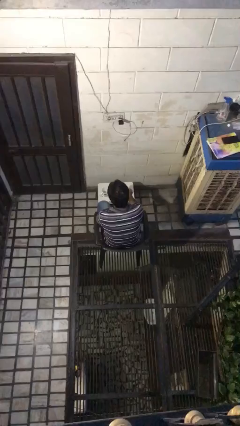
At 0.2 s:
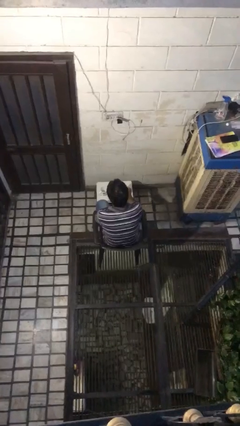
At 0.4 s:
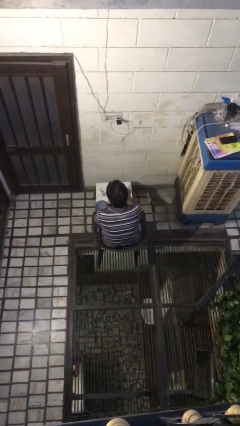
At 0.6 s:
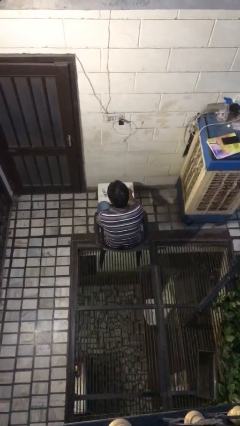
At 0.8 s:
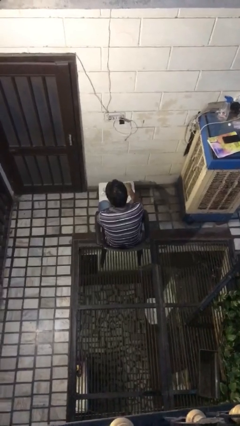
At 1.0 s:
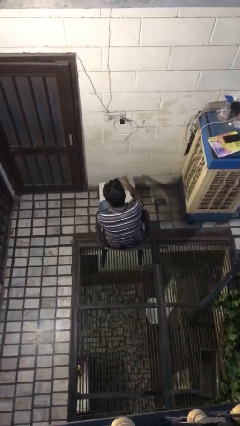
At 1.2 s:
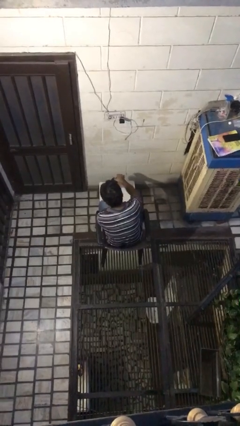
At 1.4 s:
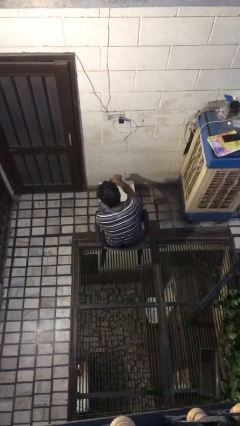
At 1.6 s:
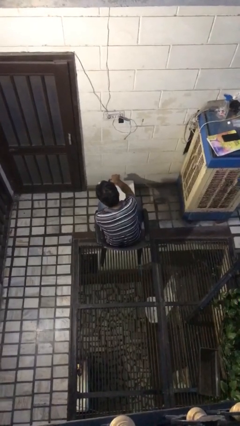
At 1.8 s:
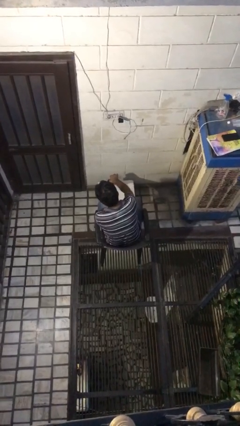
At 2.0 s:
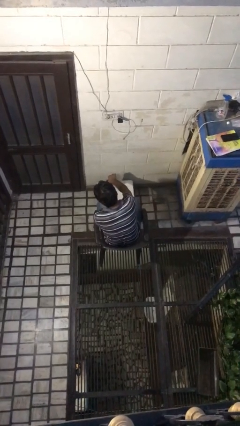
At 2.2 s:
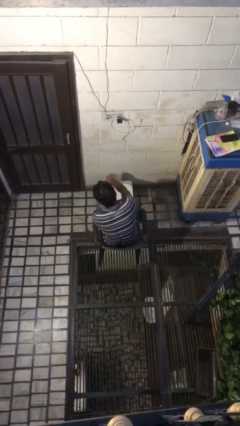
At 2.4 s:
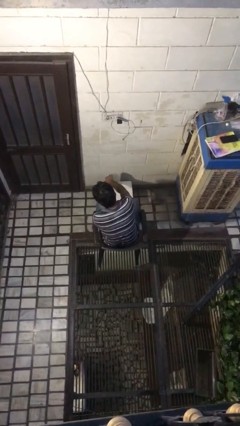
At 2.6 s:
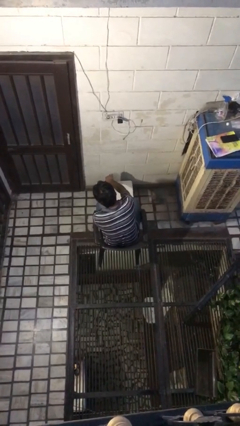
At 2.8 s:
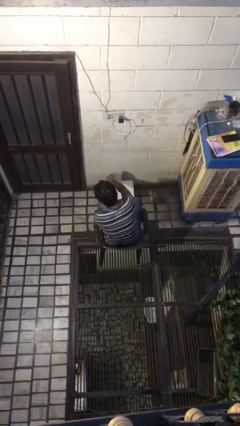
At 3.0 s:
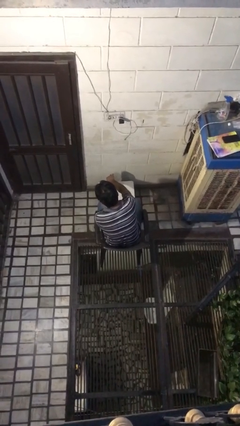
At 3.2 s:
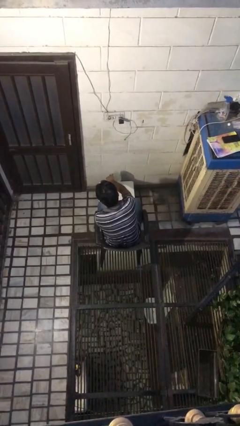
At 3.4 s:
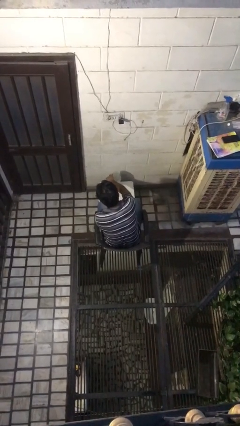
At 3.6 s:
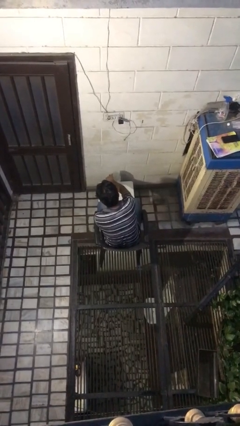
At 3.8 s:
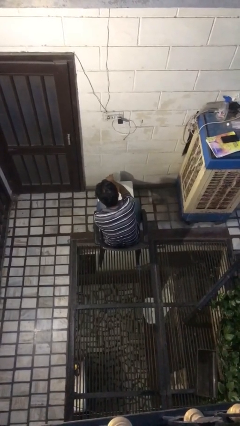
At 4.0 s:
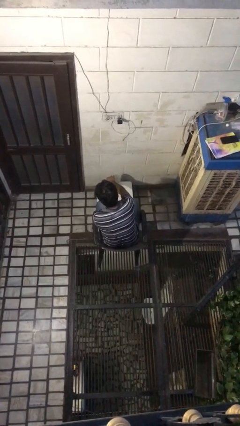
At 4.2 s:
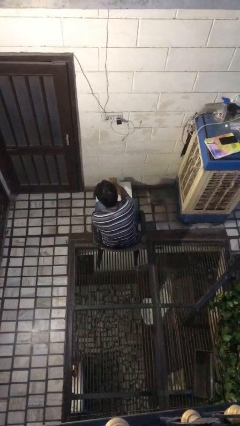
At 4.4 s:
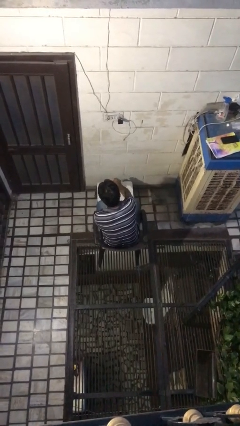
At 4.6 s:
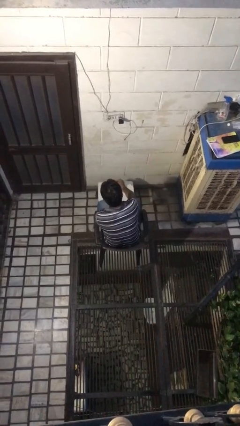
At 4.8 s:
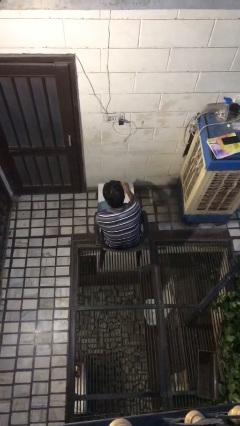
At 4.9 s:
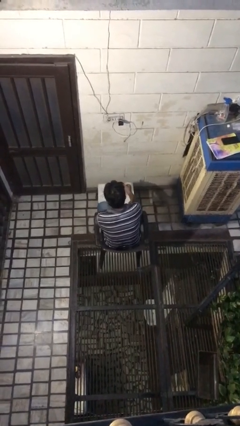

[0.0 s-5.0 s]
person pours coffee into mug

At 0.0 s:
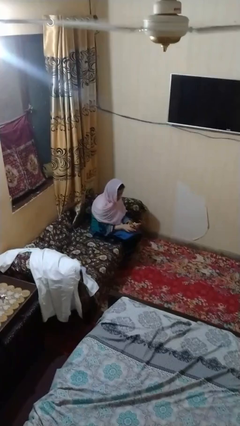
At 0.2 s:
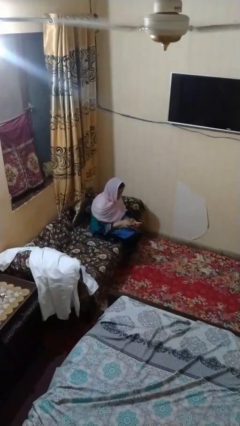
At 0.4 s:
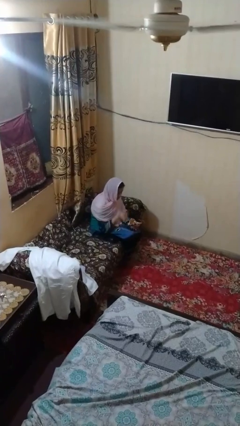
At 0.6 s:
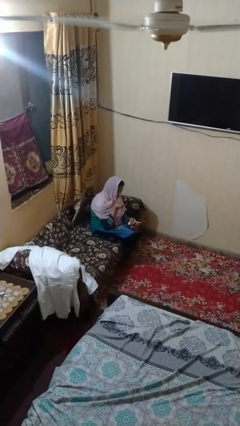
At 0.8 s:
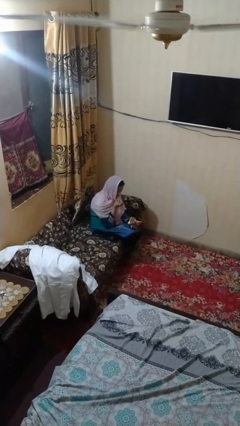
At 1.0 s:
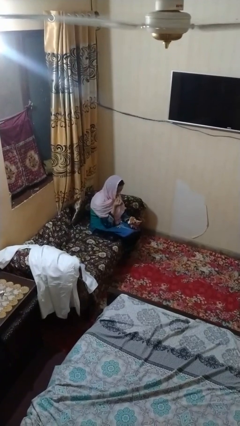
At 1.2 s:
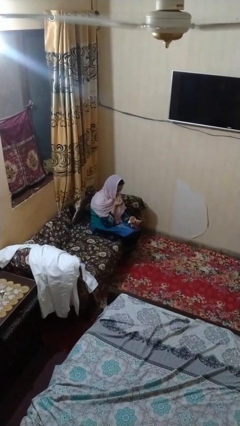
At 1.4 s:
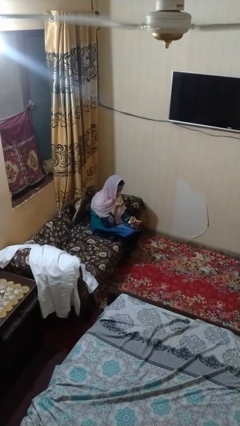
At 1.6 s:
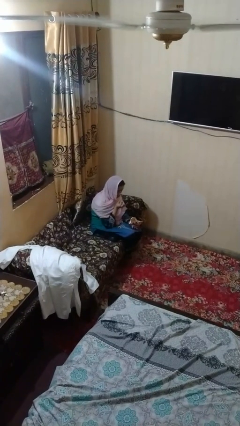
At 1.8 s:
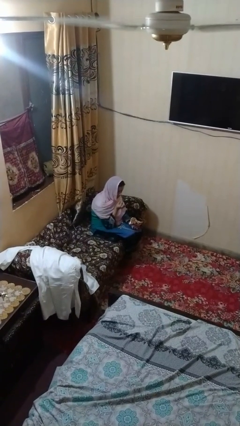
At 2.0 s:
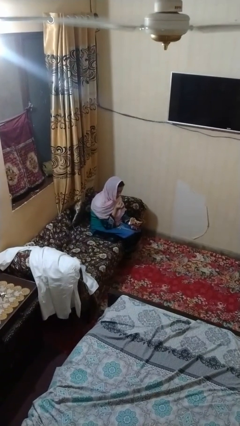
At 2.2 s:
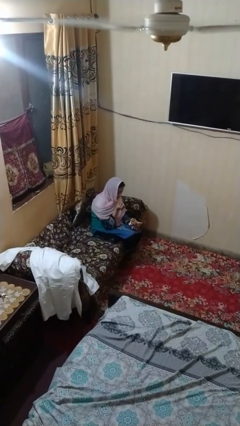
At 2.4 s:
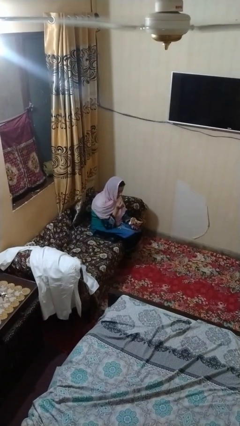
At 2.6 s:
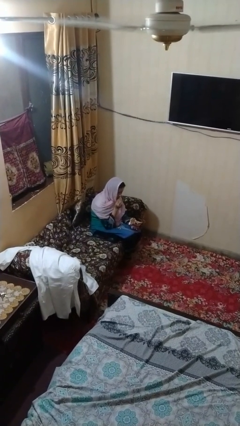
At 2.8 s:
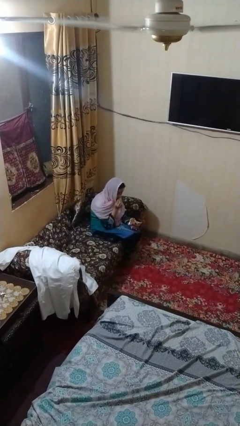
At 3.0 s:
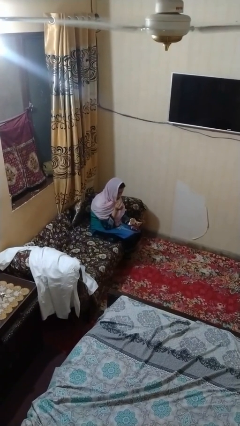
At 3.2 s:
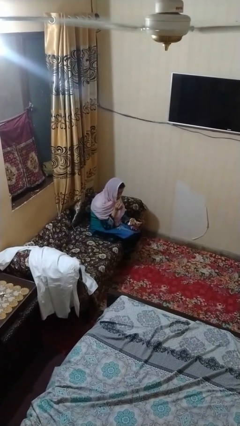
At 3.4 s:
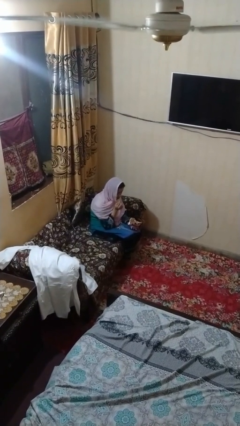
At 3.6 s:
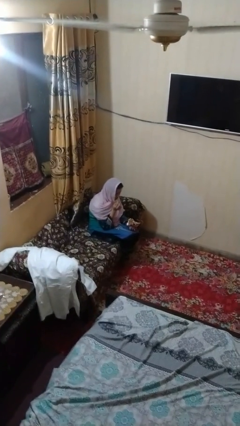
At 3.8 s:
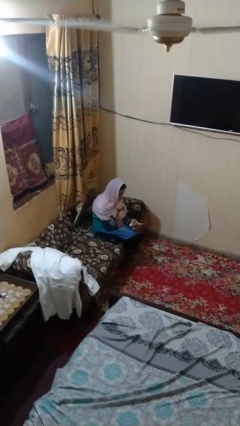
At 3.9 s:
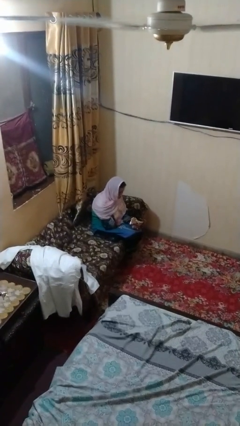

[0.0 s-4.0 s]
person eats snack from bag

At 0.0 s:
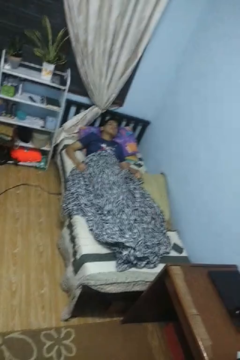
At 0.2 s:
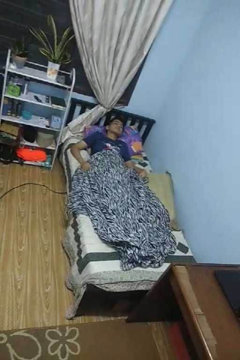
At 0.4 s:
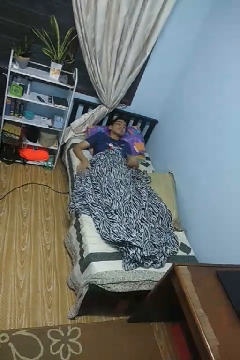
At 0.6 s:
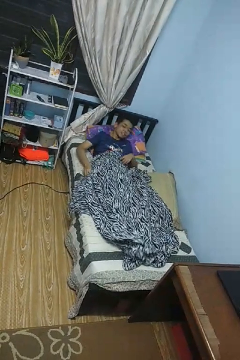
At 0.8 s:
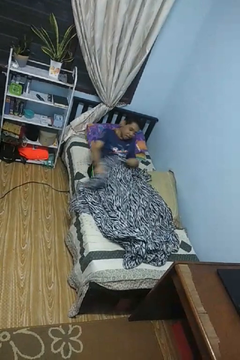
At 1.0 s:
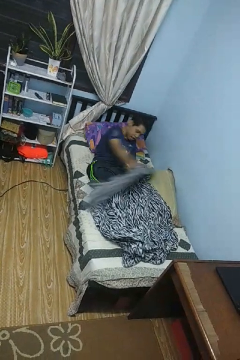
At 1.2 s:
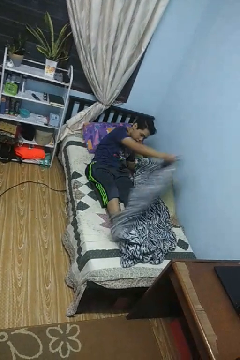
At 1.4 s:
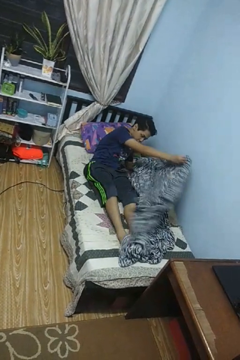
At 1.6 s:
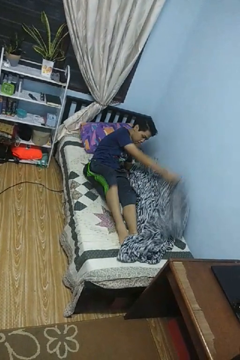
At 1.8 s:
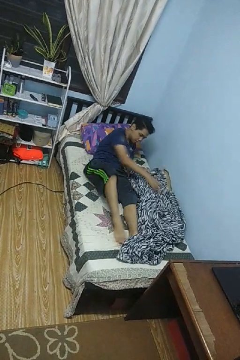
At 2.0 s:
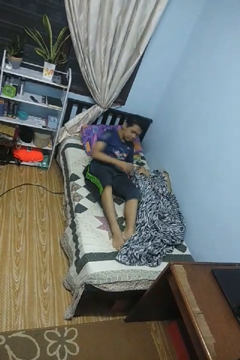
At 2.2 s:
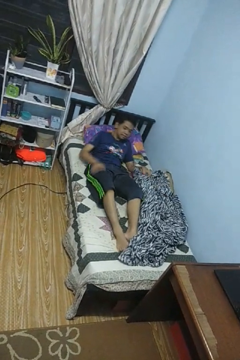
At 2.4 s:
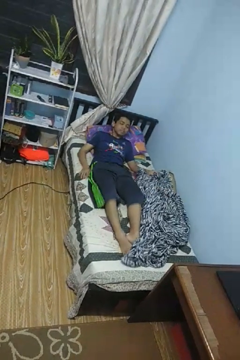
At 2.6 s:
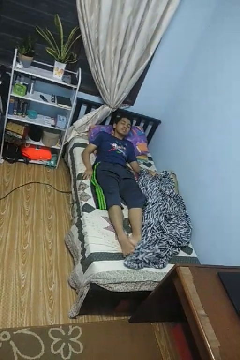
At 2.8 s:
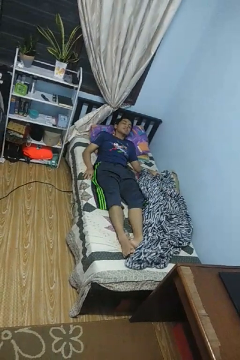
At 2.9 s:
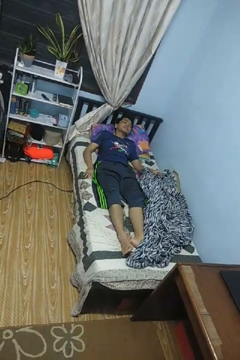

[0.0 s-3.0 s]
person uncovers with blanket

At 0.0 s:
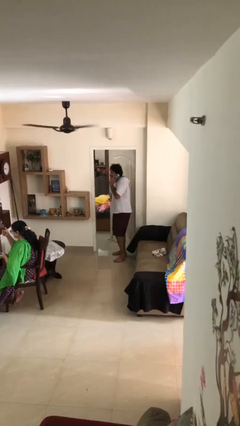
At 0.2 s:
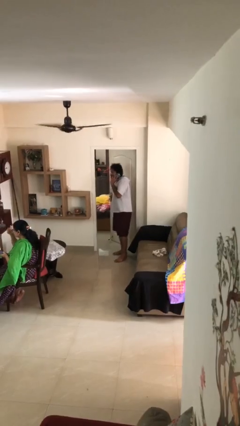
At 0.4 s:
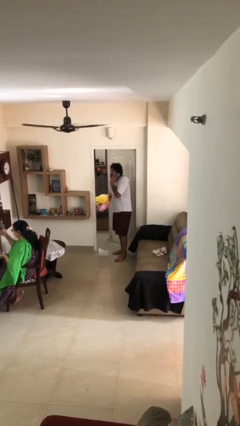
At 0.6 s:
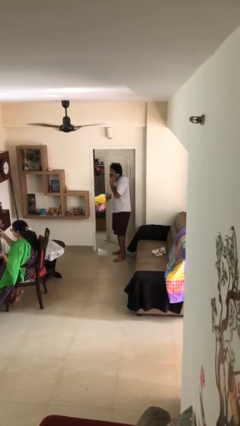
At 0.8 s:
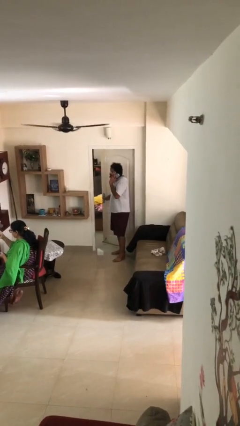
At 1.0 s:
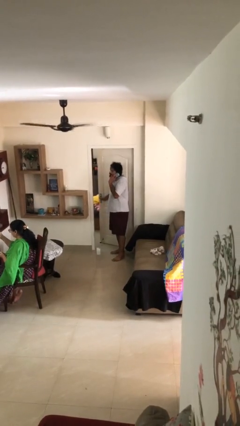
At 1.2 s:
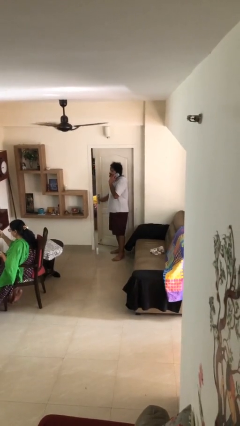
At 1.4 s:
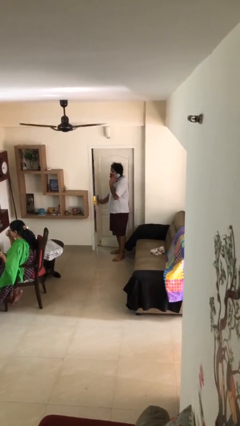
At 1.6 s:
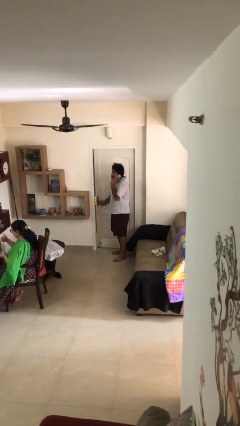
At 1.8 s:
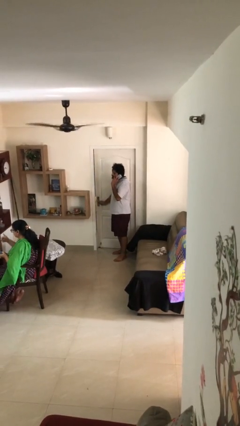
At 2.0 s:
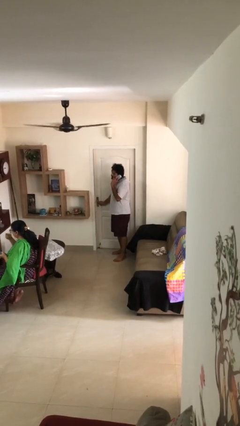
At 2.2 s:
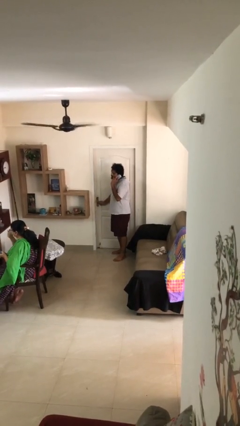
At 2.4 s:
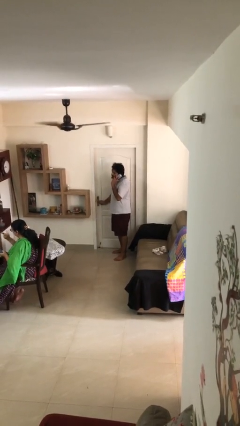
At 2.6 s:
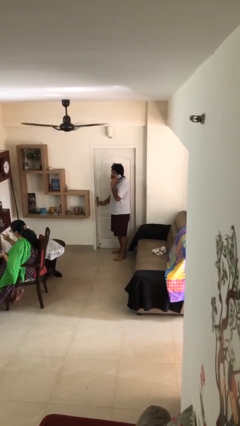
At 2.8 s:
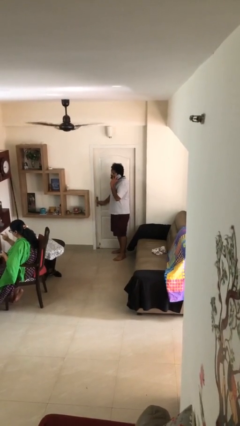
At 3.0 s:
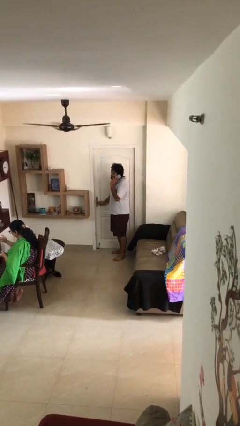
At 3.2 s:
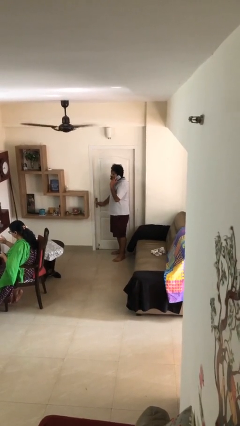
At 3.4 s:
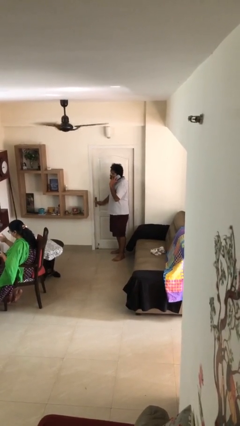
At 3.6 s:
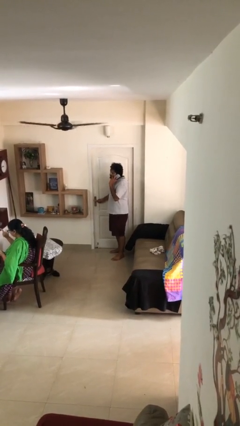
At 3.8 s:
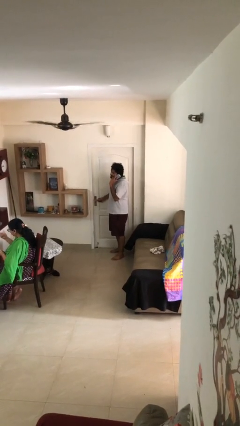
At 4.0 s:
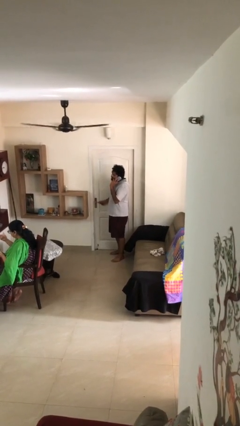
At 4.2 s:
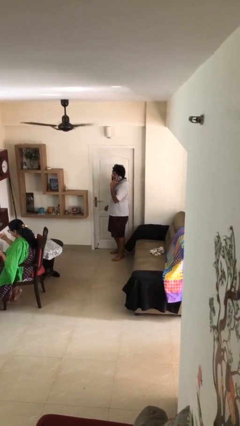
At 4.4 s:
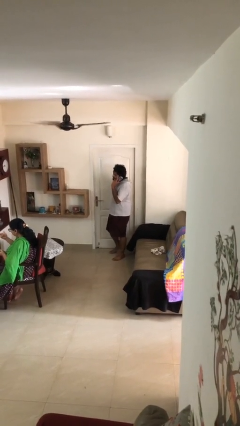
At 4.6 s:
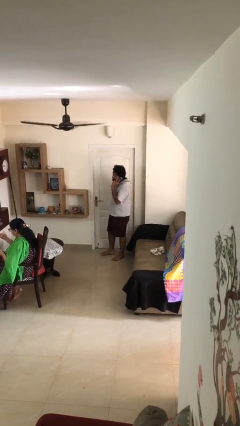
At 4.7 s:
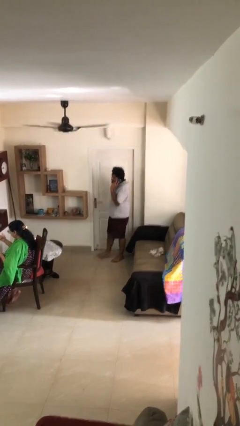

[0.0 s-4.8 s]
person closes facility door

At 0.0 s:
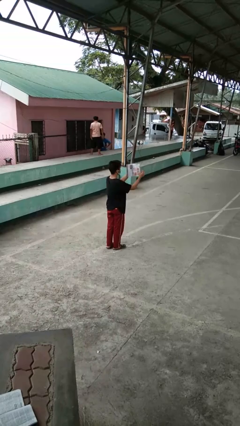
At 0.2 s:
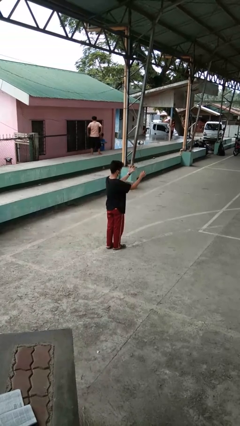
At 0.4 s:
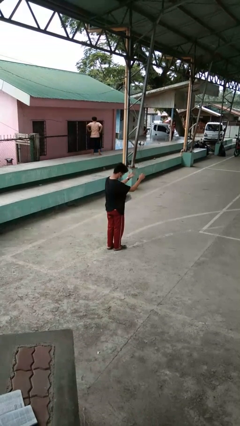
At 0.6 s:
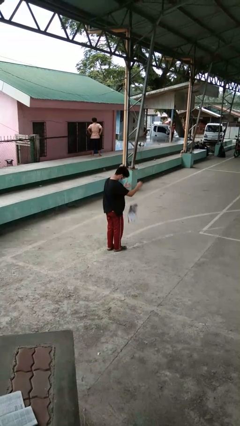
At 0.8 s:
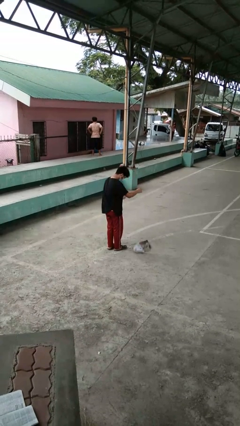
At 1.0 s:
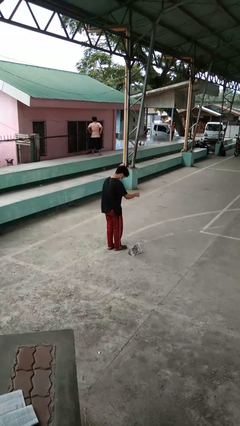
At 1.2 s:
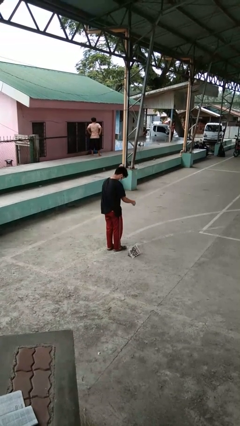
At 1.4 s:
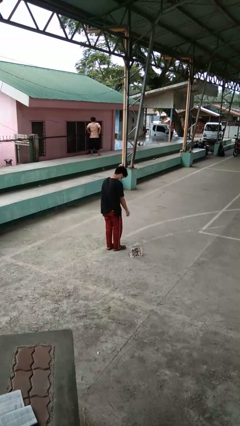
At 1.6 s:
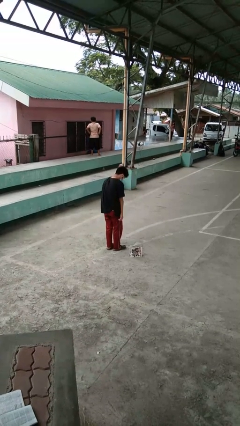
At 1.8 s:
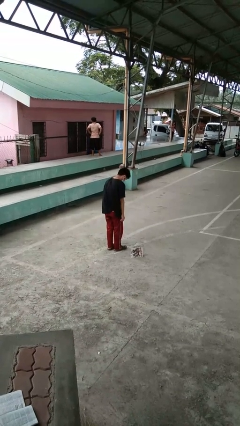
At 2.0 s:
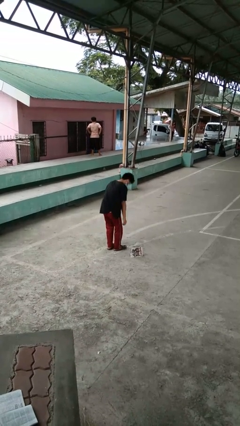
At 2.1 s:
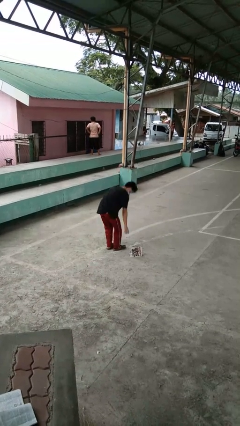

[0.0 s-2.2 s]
person drops object
